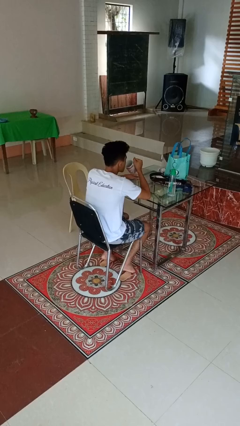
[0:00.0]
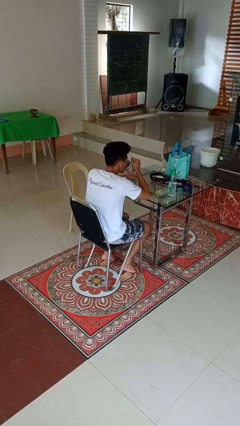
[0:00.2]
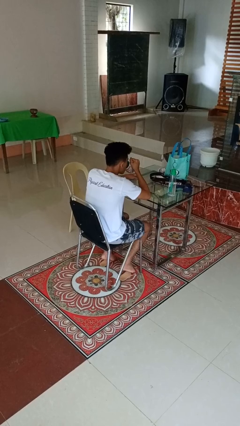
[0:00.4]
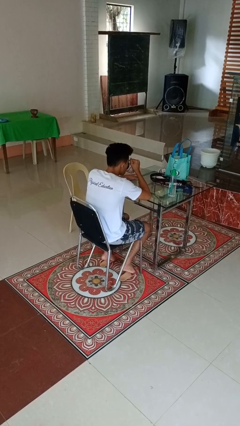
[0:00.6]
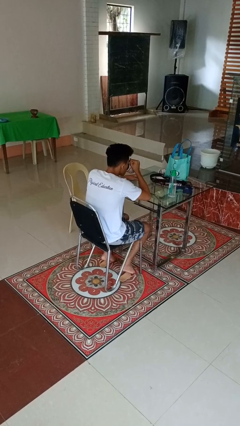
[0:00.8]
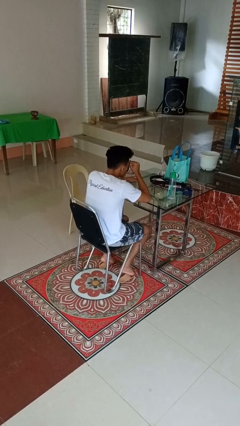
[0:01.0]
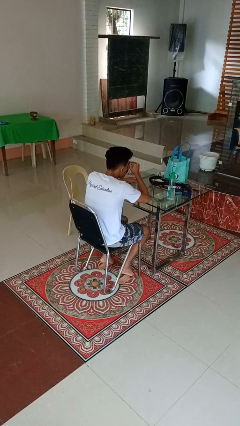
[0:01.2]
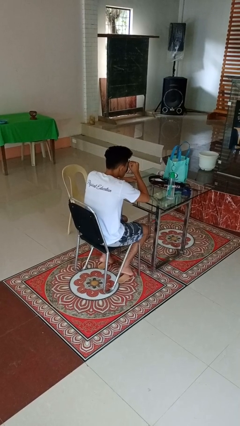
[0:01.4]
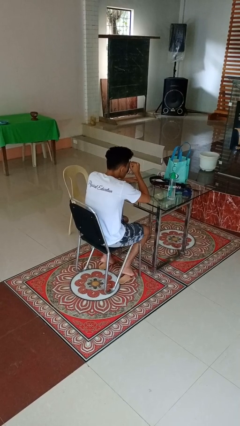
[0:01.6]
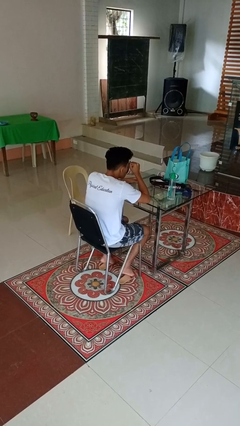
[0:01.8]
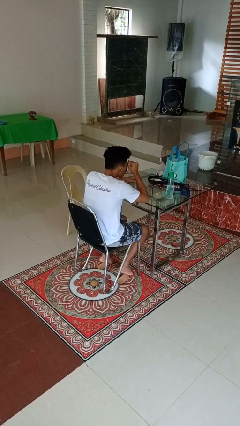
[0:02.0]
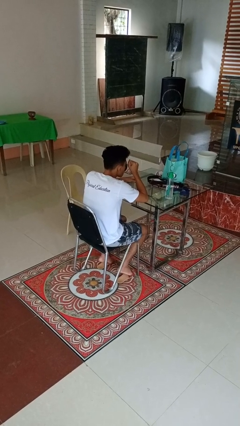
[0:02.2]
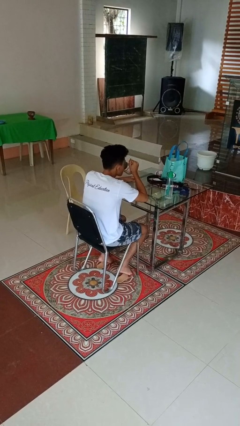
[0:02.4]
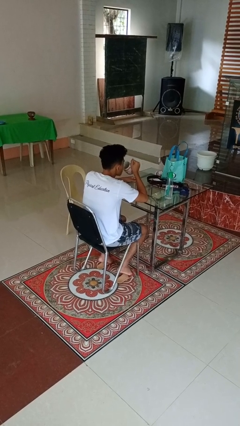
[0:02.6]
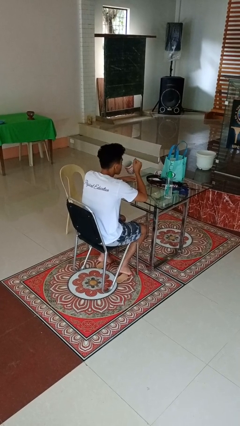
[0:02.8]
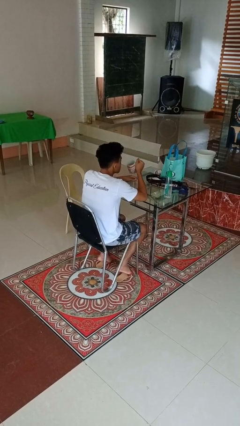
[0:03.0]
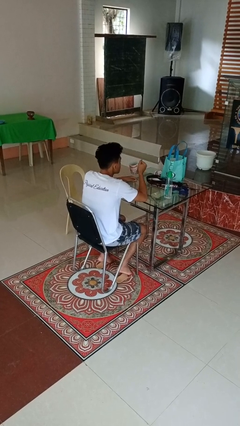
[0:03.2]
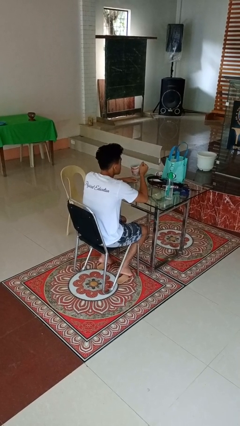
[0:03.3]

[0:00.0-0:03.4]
person drinks from mug

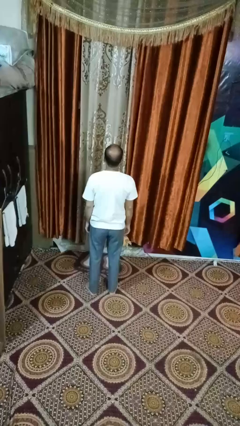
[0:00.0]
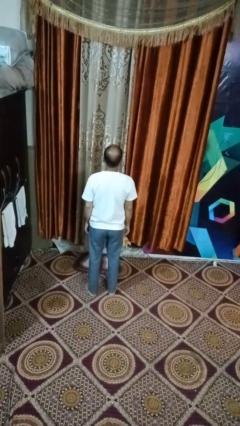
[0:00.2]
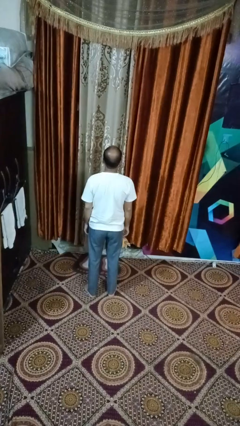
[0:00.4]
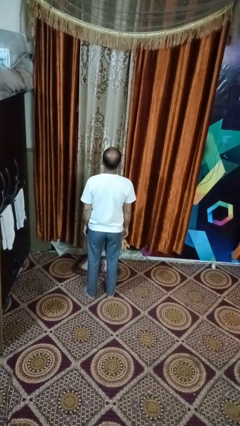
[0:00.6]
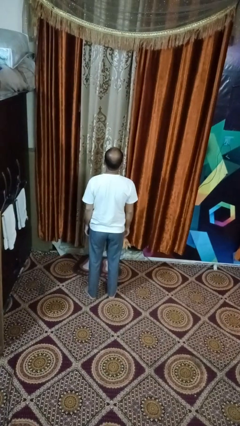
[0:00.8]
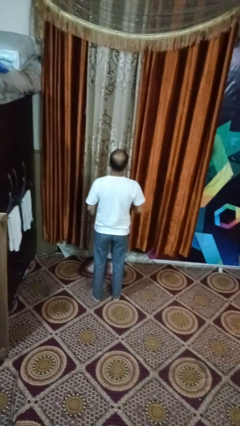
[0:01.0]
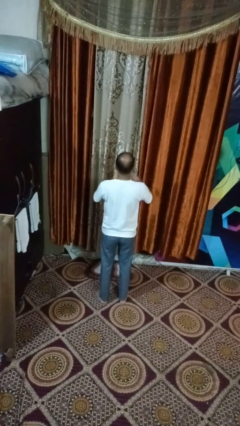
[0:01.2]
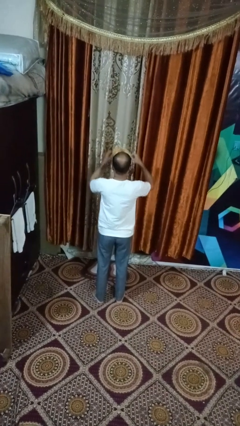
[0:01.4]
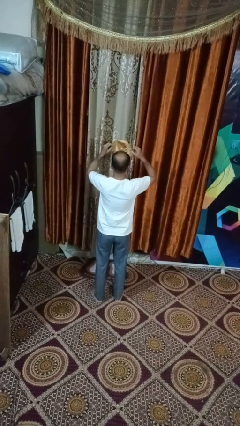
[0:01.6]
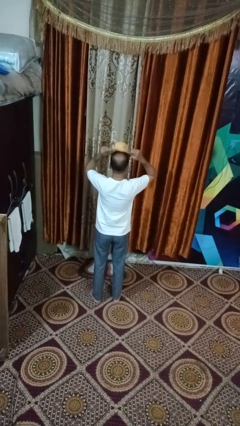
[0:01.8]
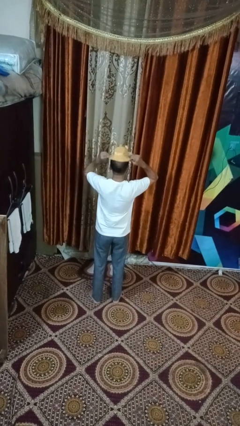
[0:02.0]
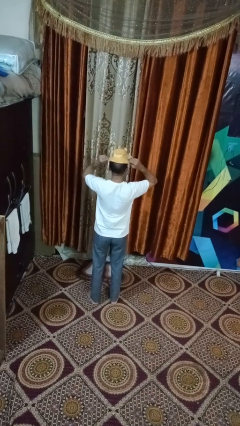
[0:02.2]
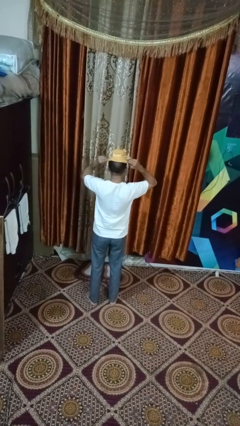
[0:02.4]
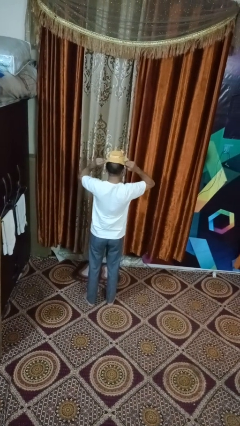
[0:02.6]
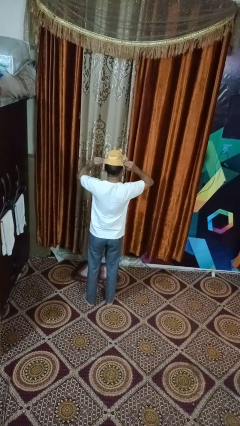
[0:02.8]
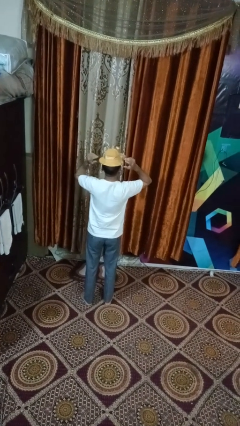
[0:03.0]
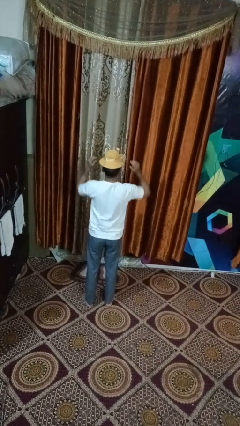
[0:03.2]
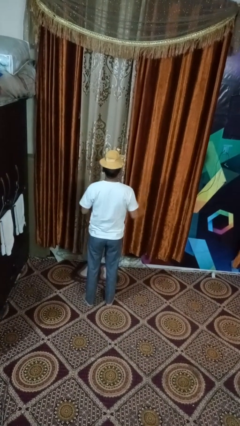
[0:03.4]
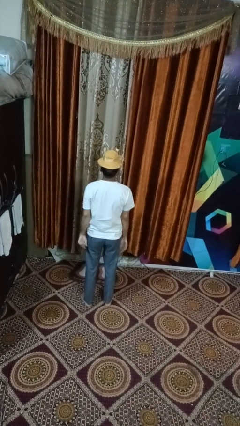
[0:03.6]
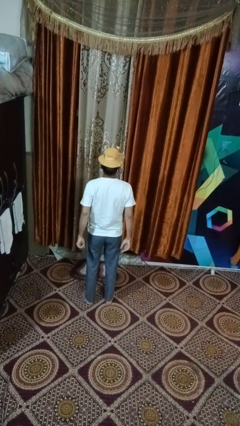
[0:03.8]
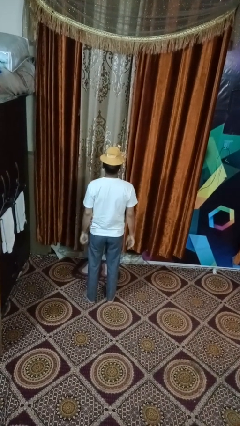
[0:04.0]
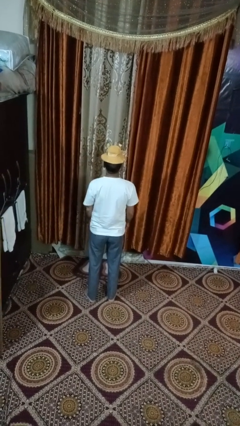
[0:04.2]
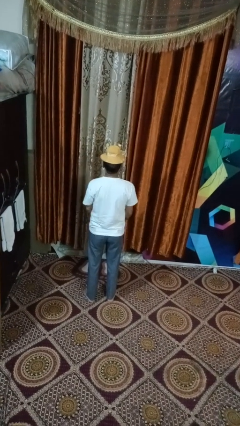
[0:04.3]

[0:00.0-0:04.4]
person puts on hat

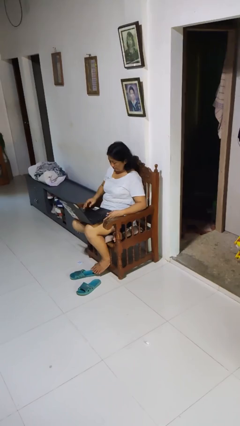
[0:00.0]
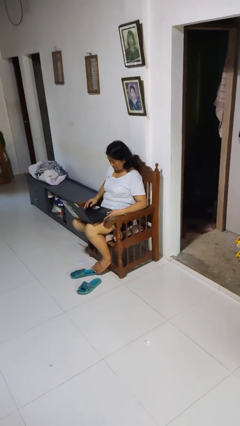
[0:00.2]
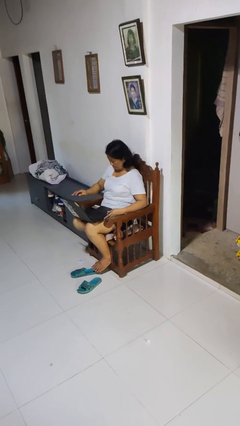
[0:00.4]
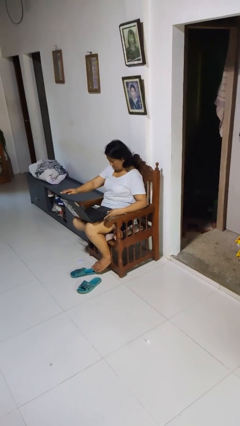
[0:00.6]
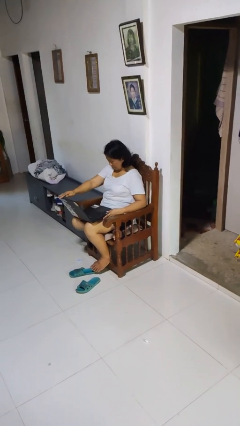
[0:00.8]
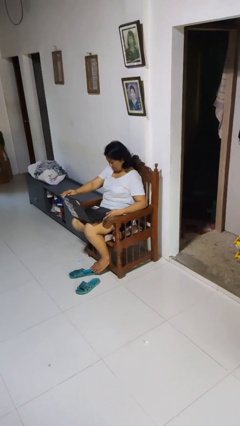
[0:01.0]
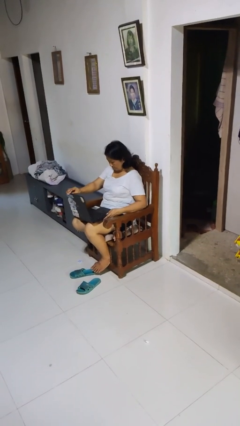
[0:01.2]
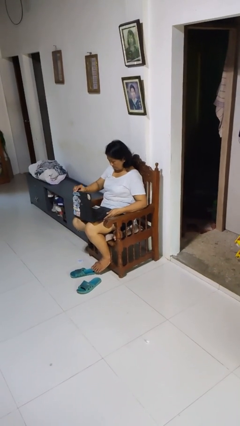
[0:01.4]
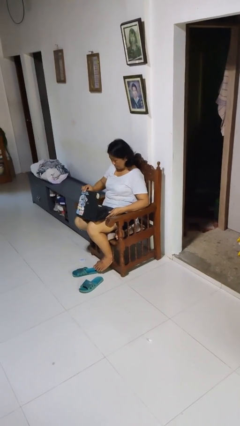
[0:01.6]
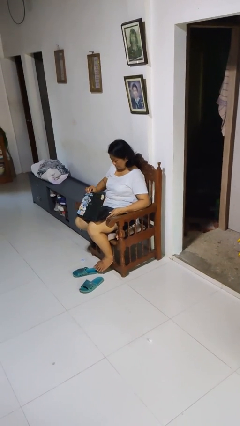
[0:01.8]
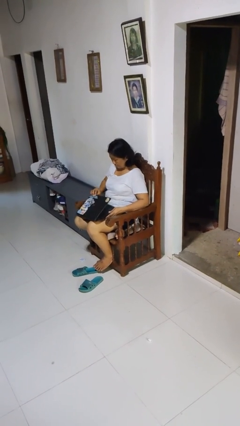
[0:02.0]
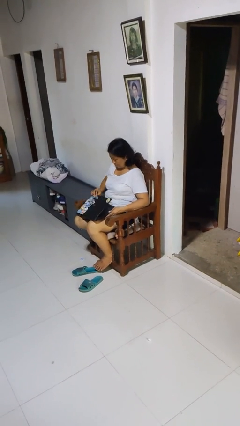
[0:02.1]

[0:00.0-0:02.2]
person closes laptop

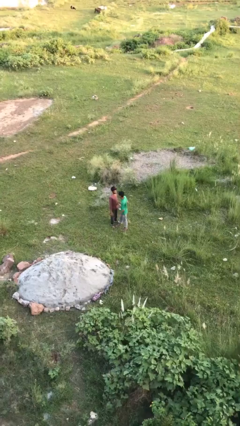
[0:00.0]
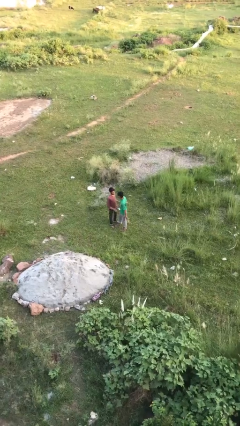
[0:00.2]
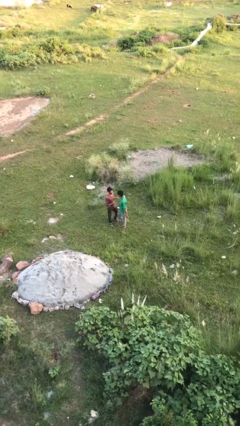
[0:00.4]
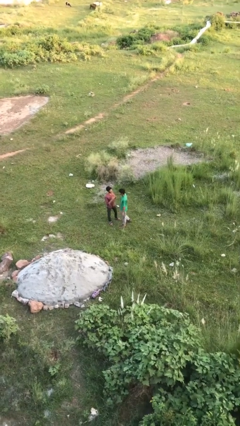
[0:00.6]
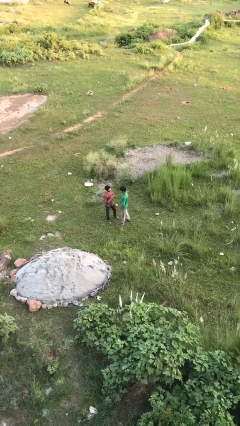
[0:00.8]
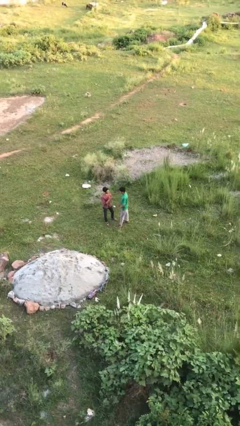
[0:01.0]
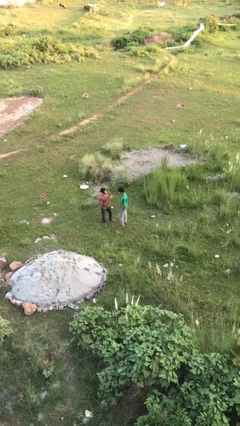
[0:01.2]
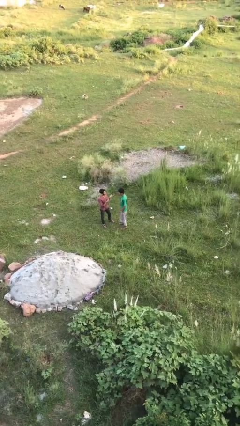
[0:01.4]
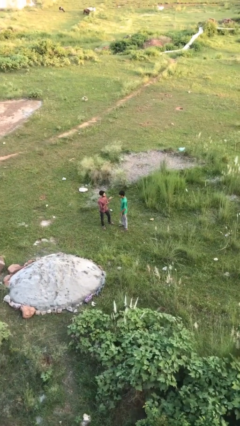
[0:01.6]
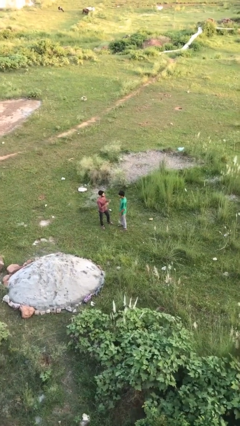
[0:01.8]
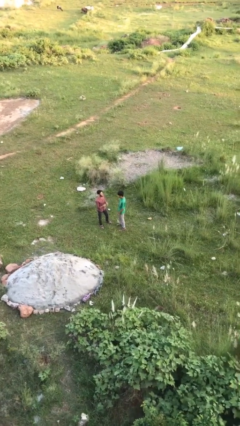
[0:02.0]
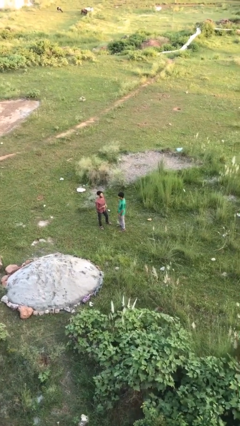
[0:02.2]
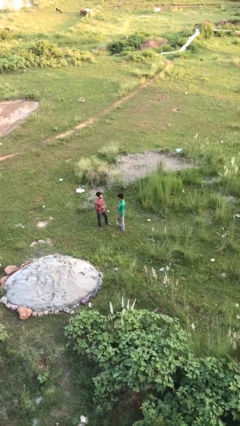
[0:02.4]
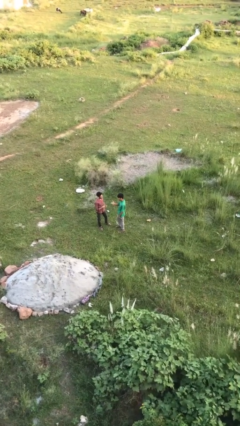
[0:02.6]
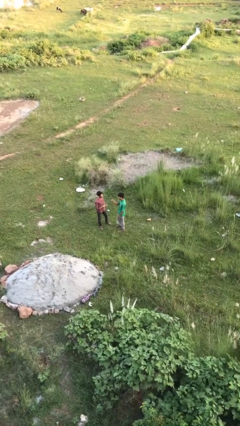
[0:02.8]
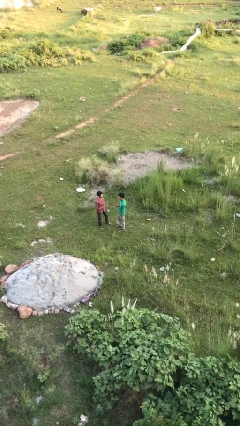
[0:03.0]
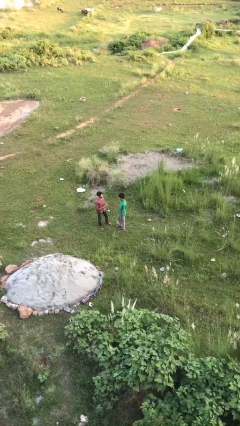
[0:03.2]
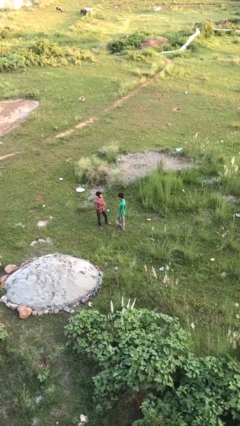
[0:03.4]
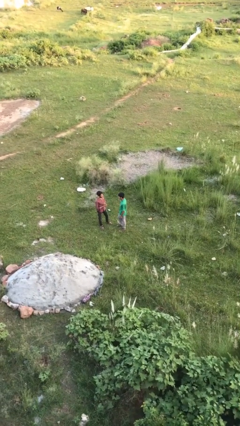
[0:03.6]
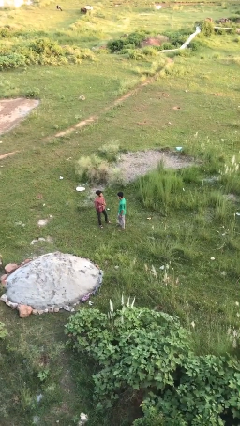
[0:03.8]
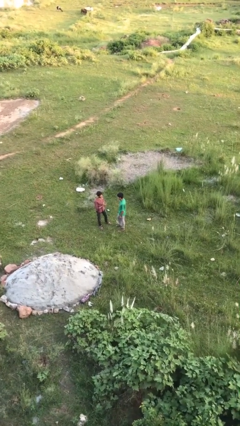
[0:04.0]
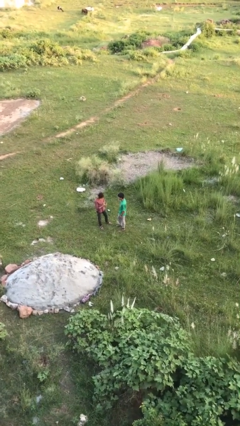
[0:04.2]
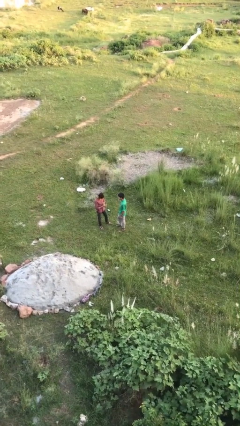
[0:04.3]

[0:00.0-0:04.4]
person talks to person

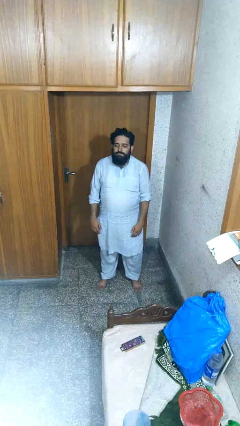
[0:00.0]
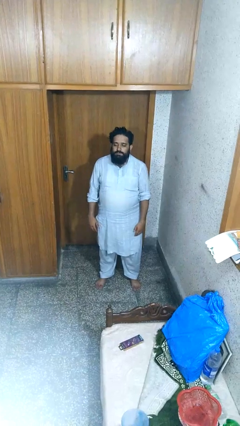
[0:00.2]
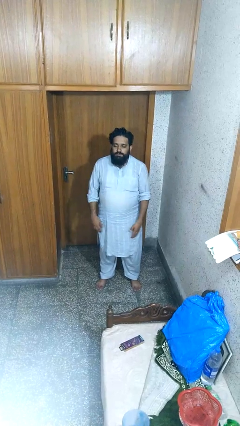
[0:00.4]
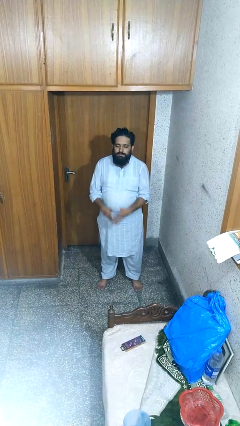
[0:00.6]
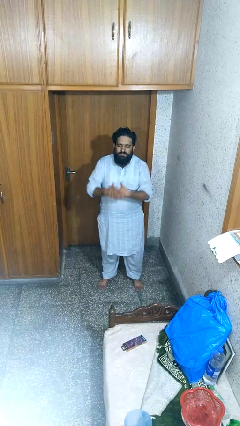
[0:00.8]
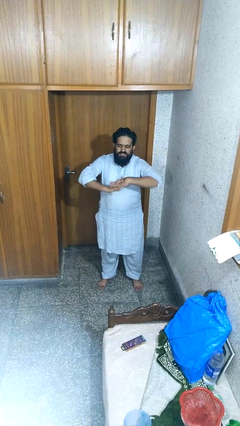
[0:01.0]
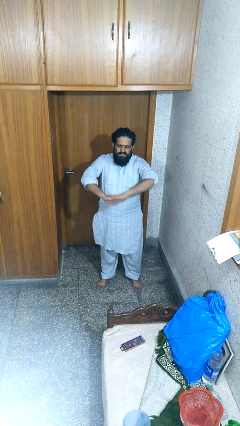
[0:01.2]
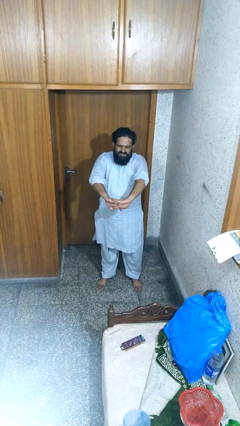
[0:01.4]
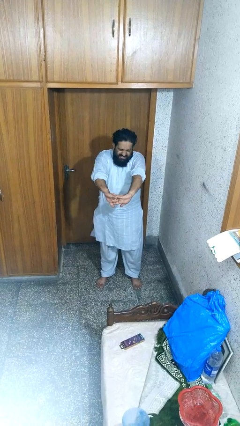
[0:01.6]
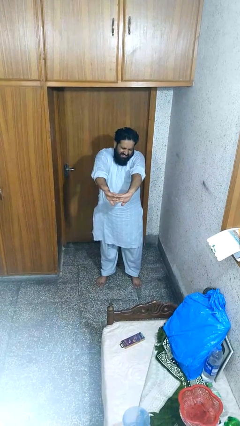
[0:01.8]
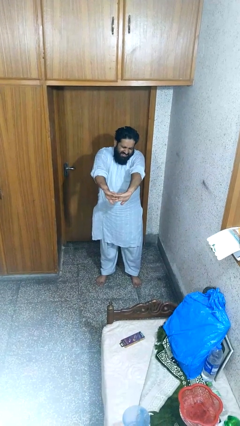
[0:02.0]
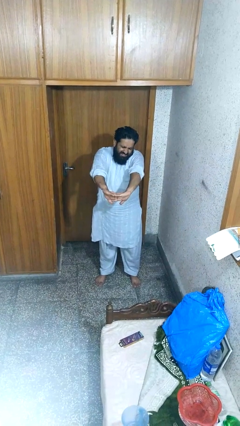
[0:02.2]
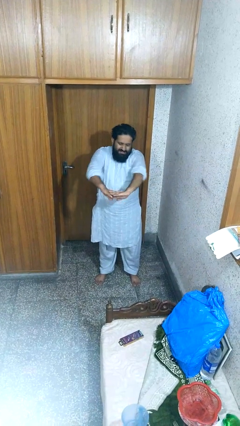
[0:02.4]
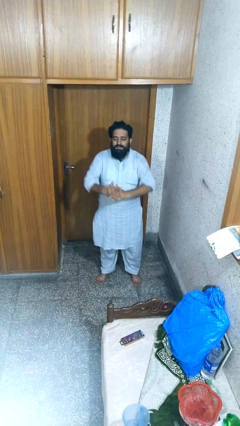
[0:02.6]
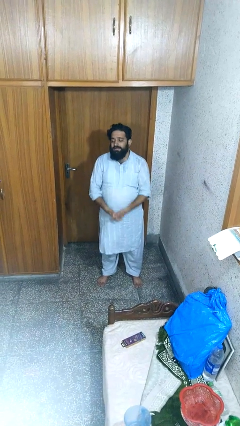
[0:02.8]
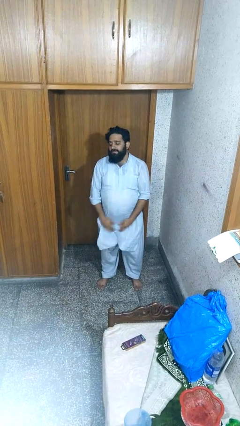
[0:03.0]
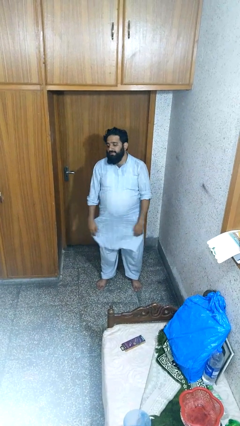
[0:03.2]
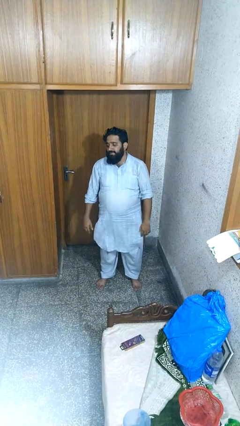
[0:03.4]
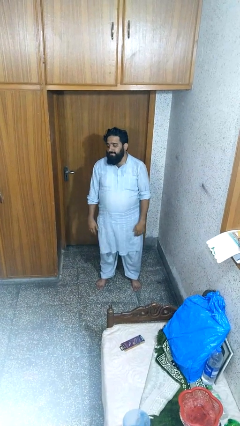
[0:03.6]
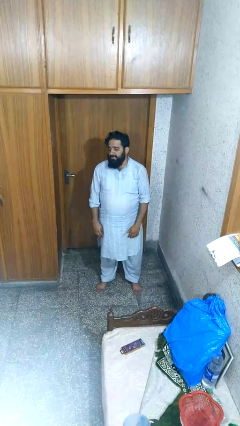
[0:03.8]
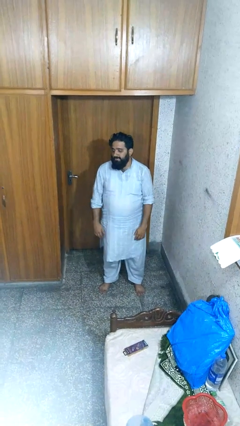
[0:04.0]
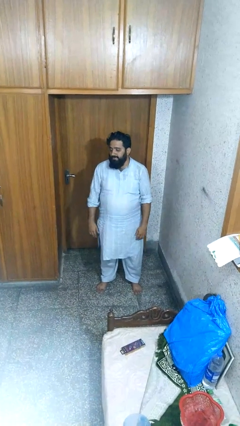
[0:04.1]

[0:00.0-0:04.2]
person cracks knuckles
